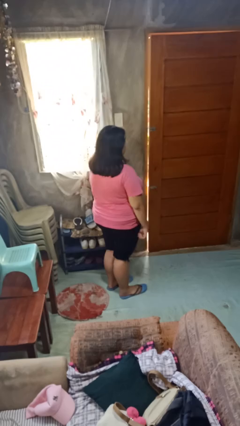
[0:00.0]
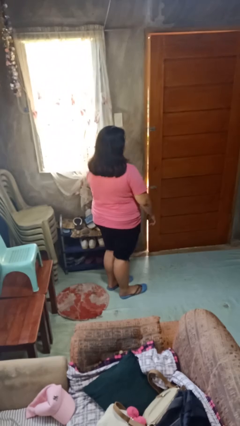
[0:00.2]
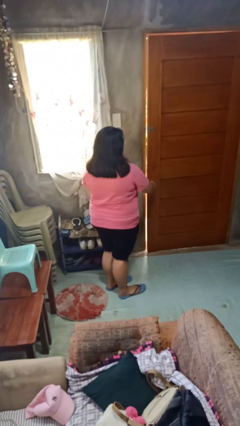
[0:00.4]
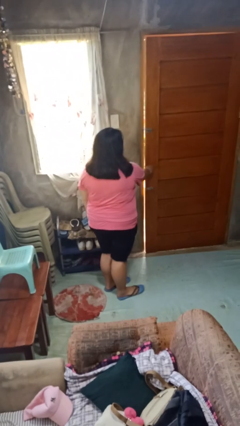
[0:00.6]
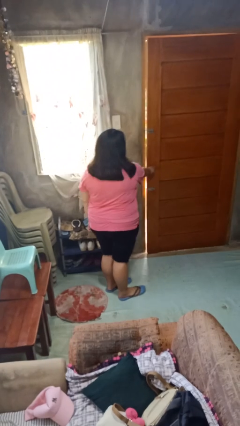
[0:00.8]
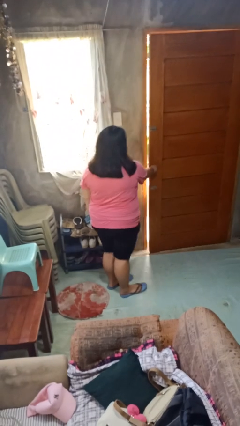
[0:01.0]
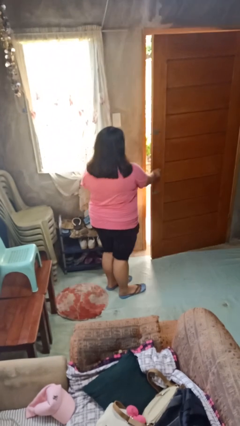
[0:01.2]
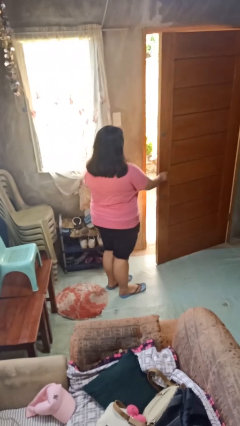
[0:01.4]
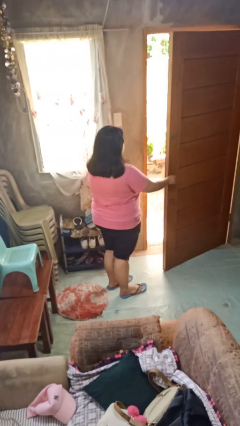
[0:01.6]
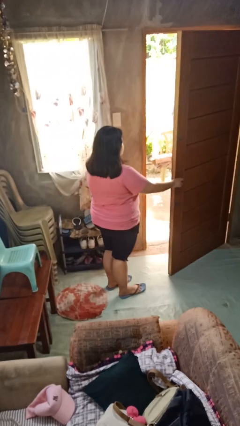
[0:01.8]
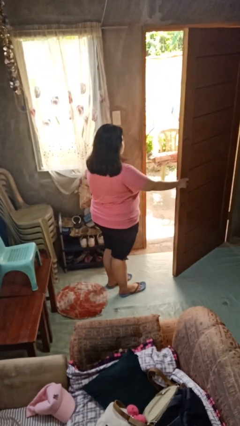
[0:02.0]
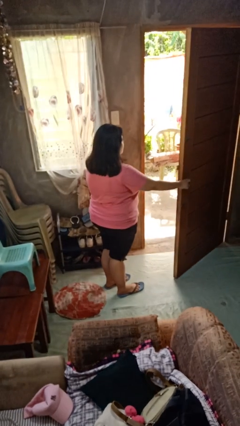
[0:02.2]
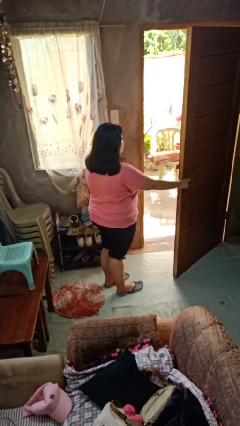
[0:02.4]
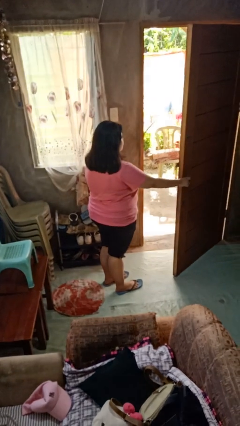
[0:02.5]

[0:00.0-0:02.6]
person opens facility door

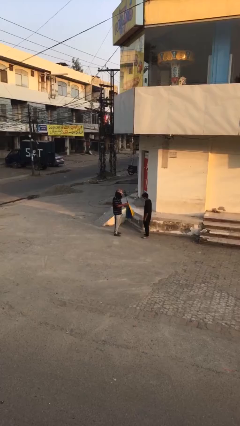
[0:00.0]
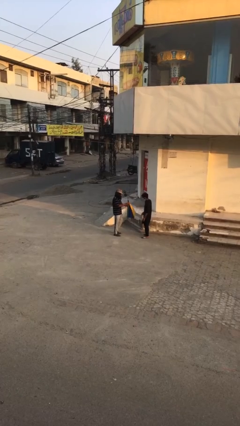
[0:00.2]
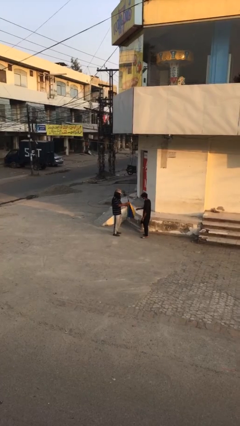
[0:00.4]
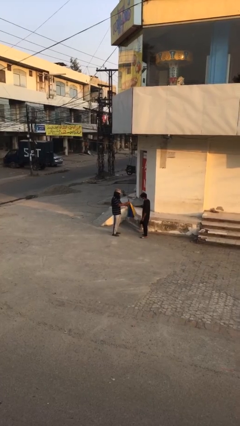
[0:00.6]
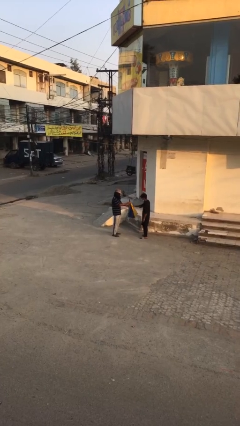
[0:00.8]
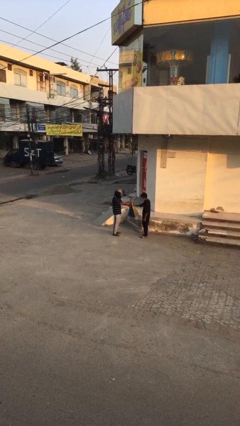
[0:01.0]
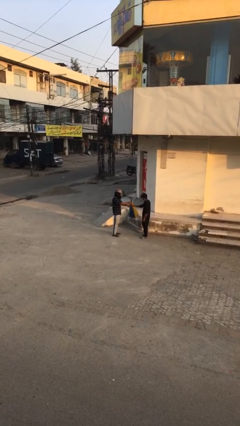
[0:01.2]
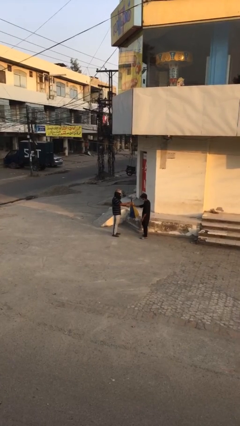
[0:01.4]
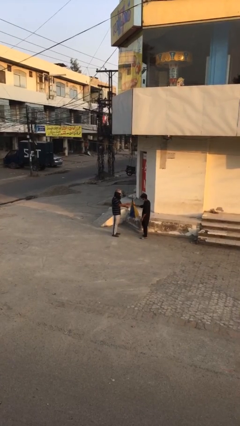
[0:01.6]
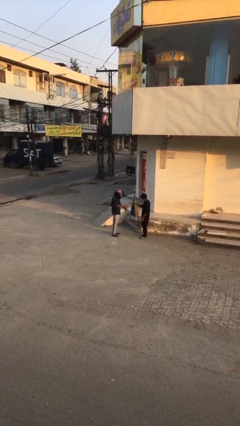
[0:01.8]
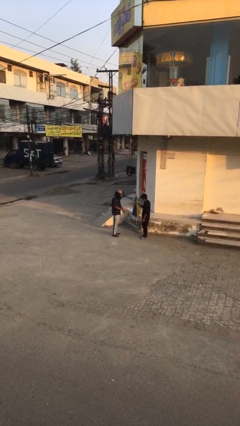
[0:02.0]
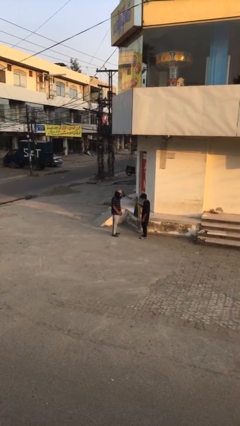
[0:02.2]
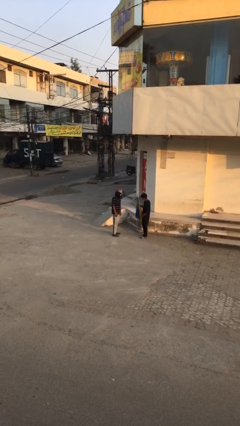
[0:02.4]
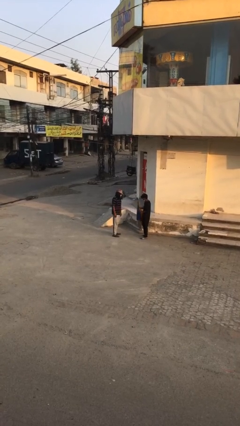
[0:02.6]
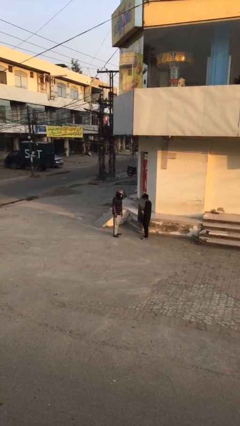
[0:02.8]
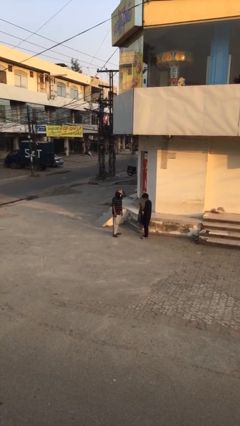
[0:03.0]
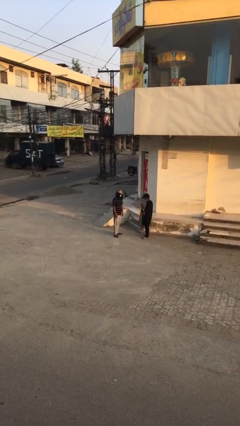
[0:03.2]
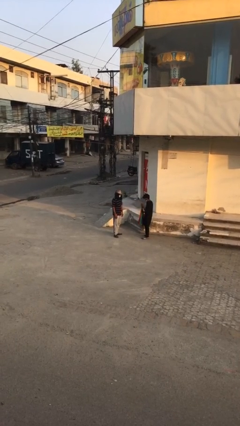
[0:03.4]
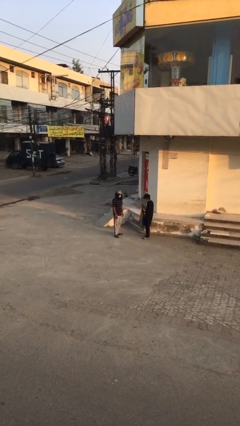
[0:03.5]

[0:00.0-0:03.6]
person transfers object to person

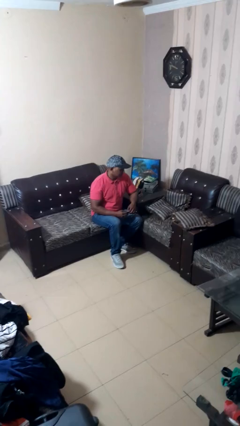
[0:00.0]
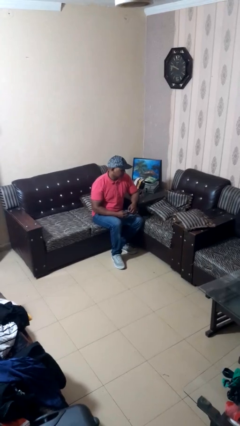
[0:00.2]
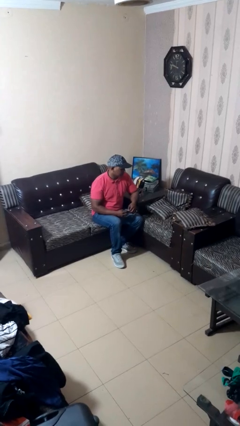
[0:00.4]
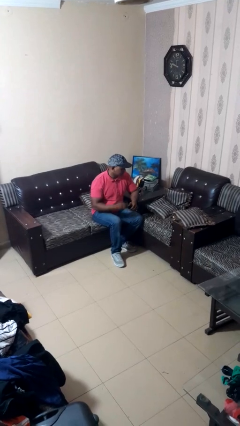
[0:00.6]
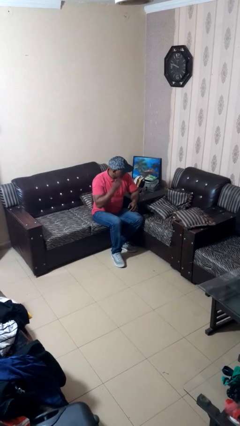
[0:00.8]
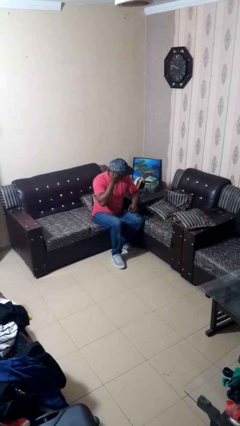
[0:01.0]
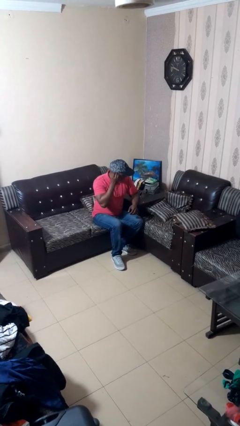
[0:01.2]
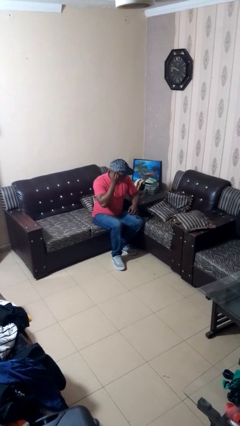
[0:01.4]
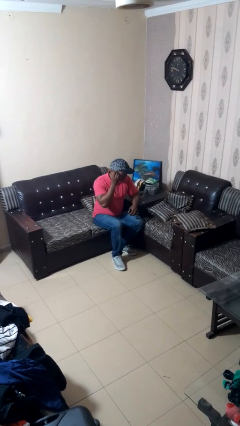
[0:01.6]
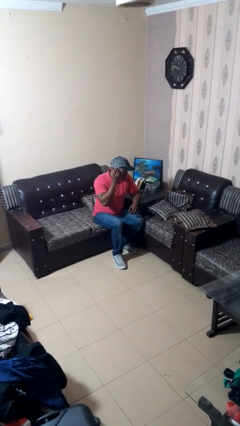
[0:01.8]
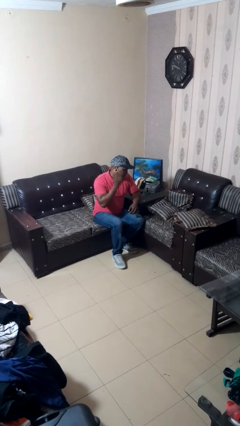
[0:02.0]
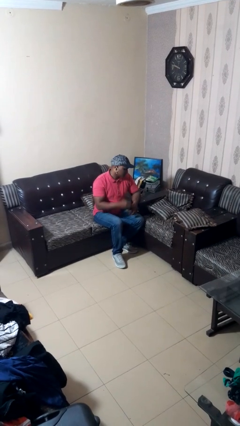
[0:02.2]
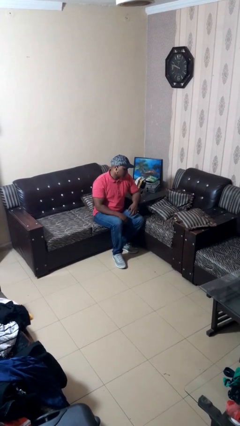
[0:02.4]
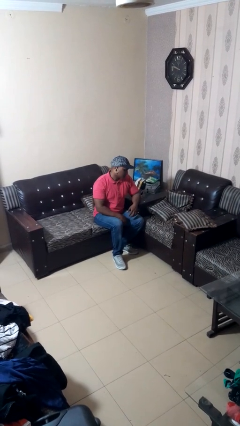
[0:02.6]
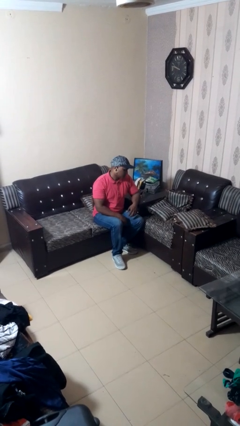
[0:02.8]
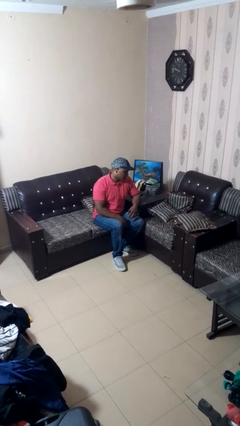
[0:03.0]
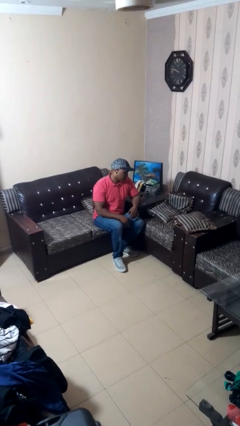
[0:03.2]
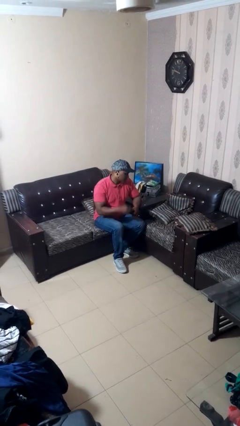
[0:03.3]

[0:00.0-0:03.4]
person puts on earrings

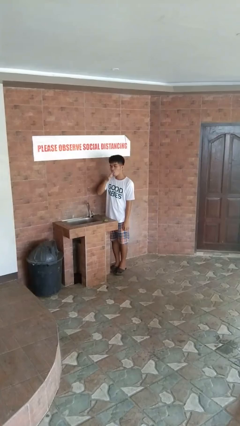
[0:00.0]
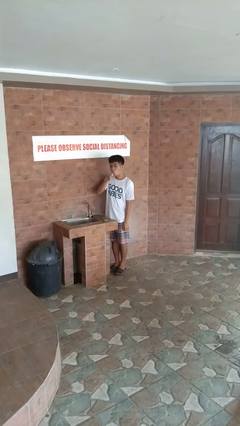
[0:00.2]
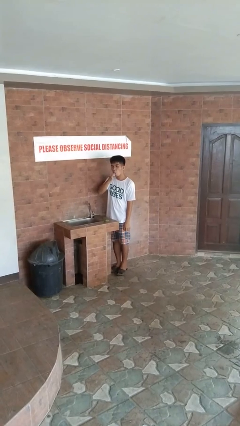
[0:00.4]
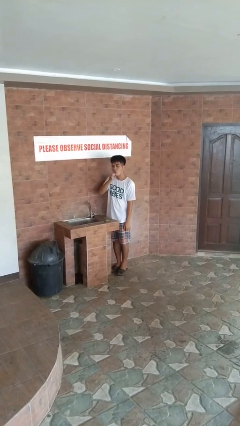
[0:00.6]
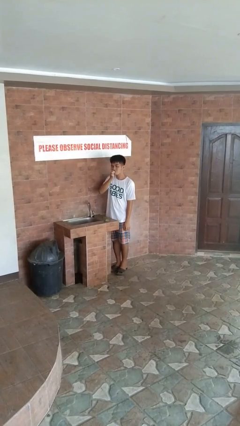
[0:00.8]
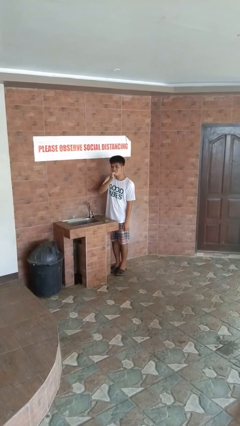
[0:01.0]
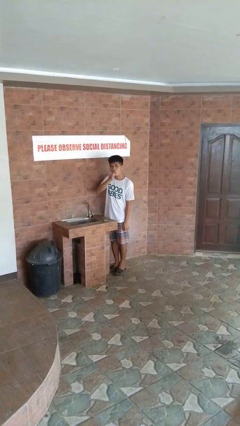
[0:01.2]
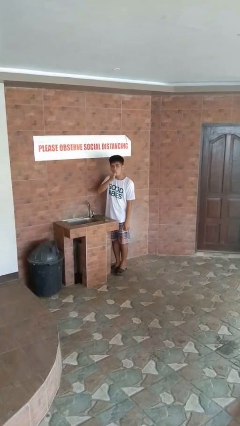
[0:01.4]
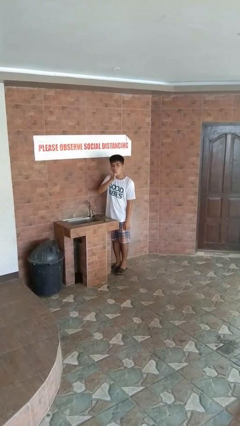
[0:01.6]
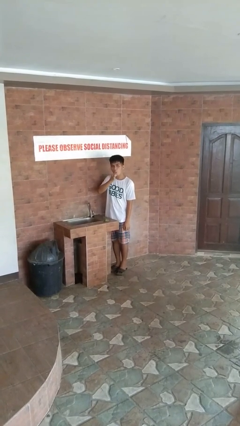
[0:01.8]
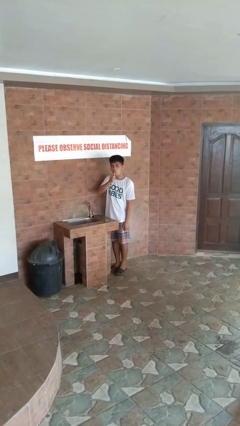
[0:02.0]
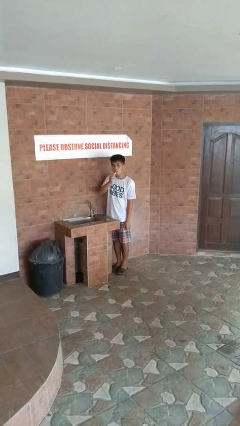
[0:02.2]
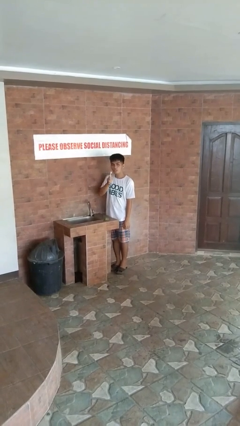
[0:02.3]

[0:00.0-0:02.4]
person brushes teeth

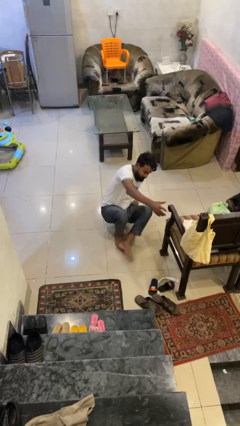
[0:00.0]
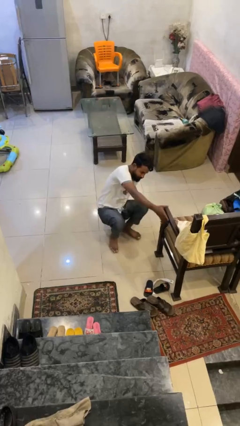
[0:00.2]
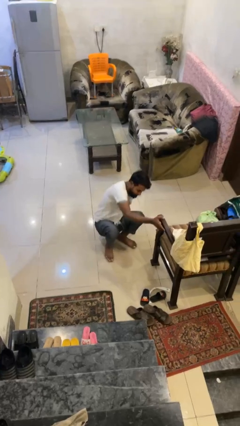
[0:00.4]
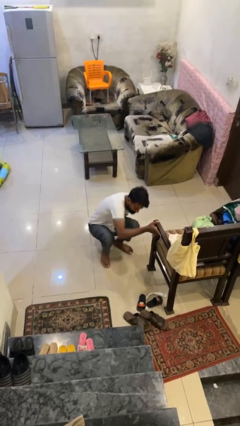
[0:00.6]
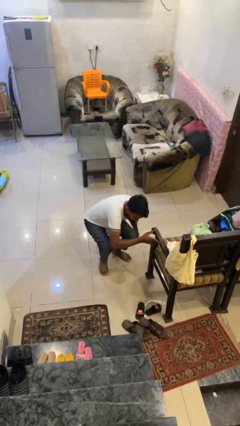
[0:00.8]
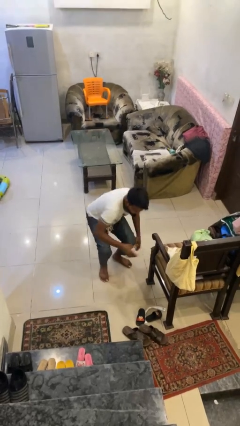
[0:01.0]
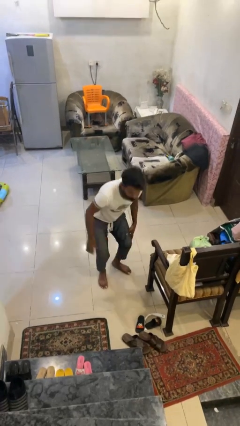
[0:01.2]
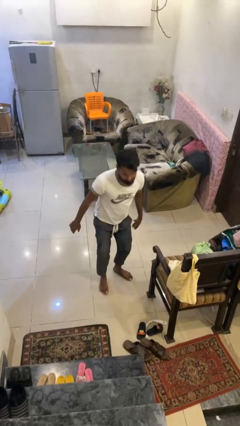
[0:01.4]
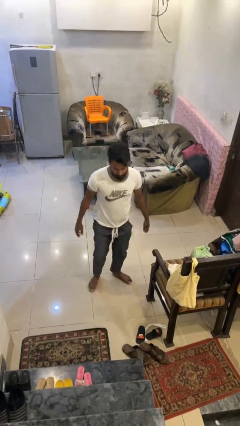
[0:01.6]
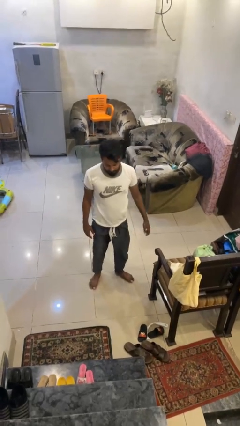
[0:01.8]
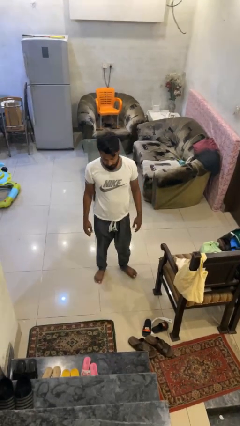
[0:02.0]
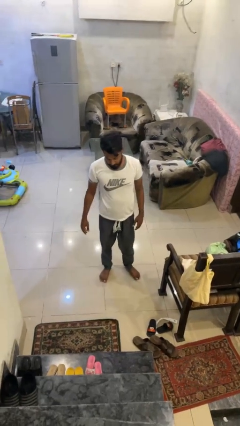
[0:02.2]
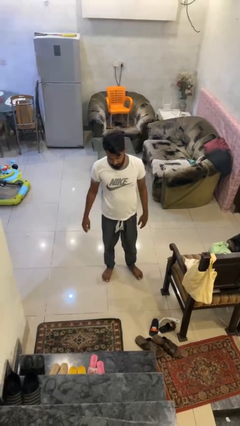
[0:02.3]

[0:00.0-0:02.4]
person stands up from floor

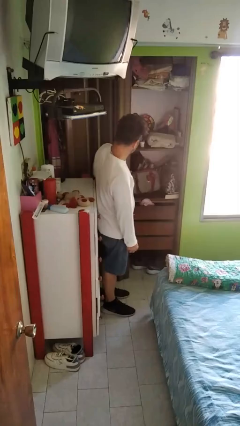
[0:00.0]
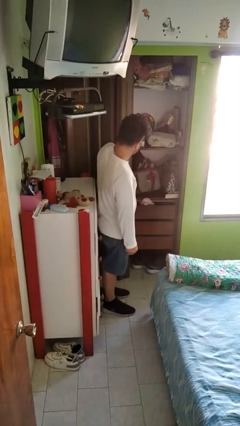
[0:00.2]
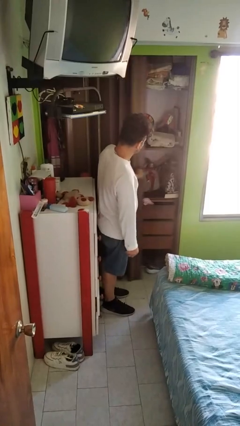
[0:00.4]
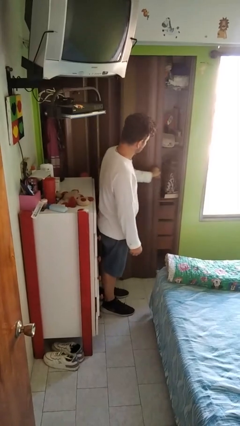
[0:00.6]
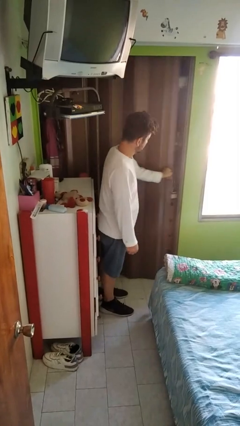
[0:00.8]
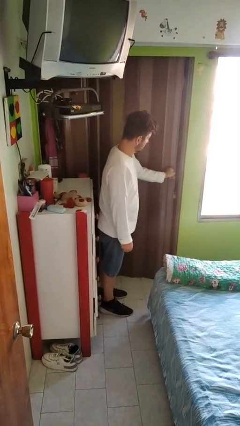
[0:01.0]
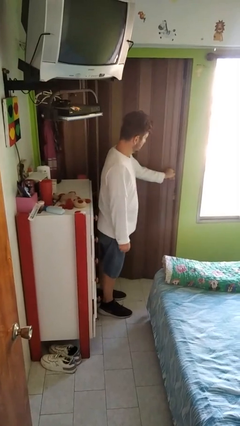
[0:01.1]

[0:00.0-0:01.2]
person closes sliding door

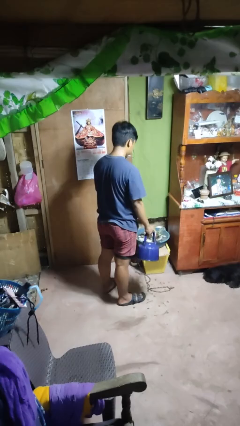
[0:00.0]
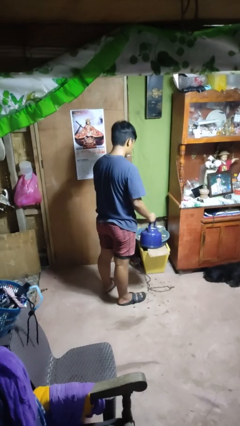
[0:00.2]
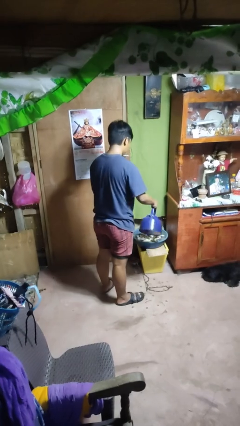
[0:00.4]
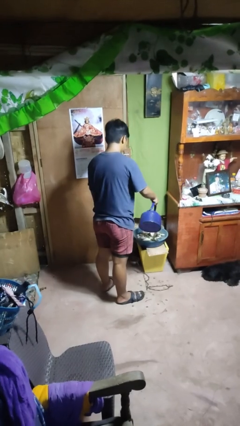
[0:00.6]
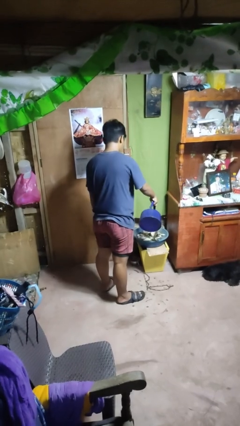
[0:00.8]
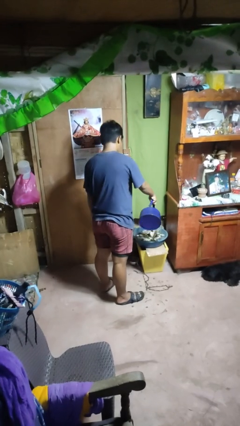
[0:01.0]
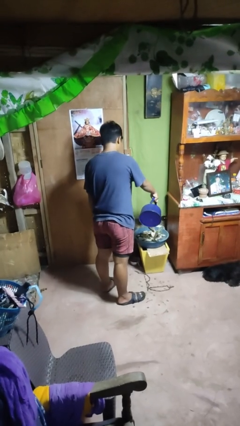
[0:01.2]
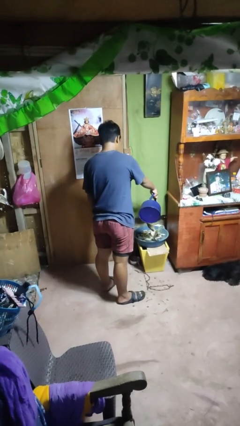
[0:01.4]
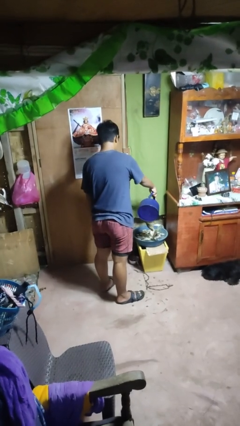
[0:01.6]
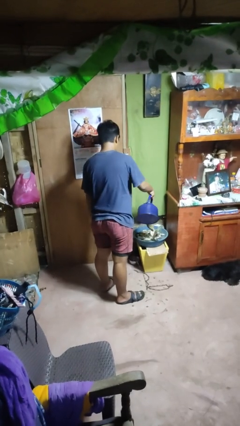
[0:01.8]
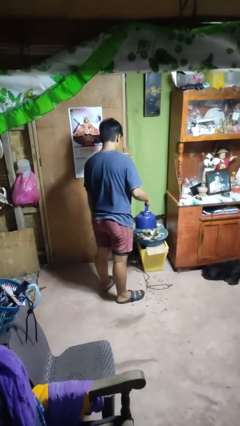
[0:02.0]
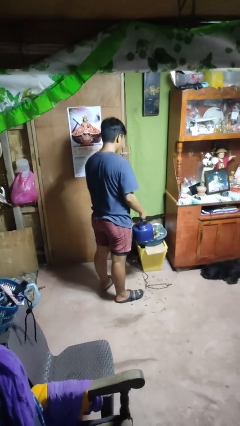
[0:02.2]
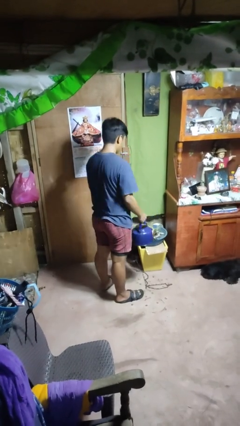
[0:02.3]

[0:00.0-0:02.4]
person waters houseplant
